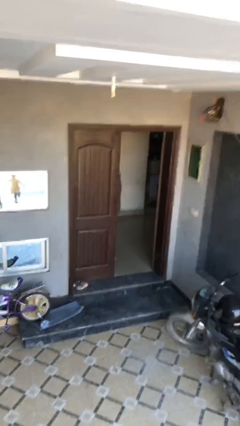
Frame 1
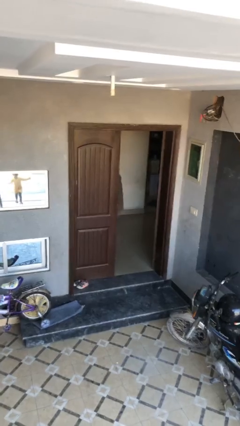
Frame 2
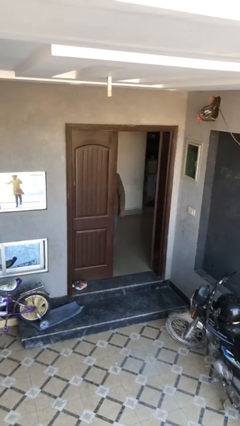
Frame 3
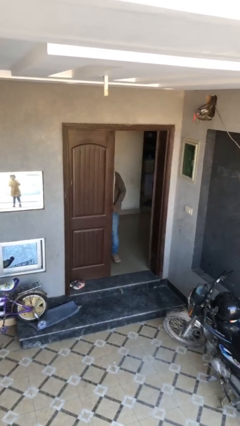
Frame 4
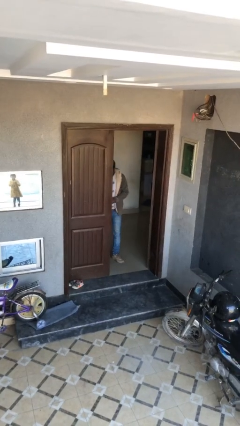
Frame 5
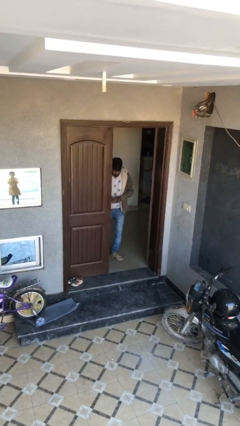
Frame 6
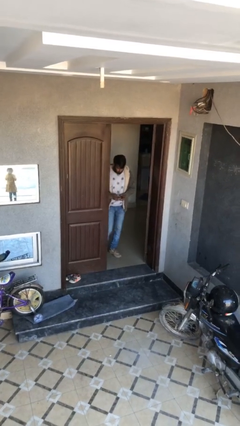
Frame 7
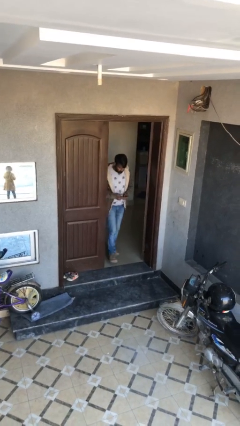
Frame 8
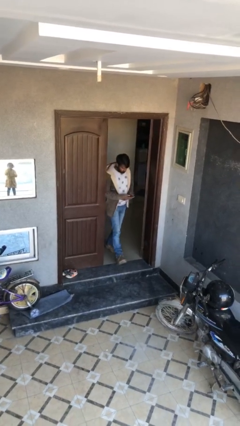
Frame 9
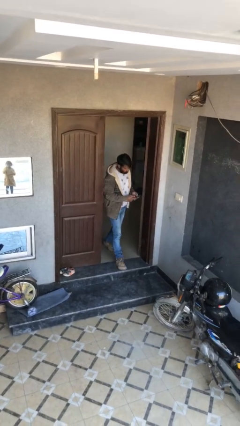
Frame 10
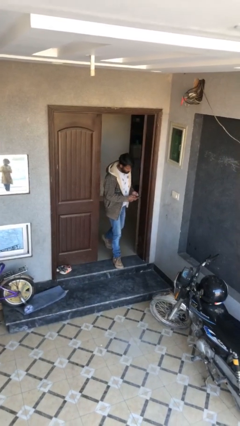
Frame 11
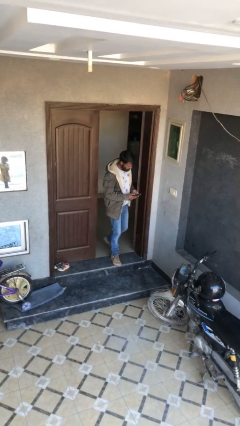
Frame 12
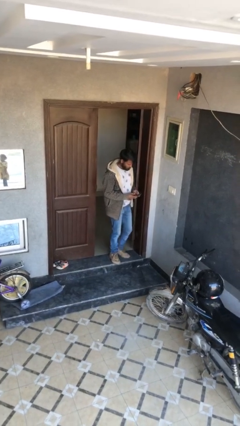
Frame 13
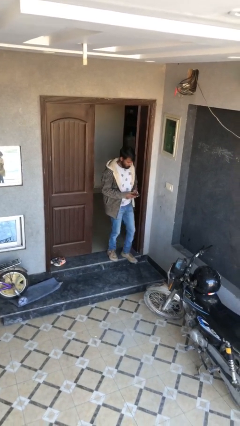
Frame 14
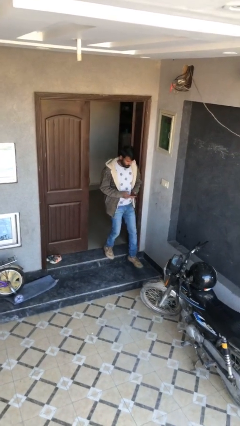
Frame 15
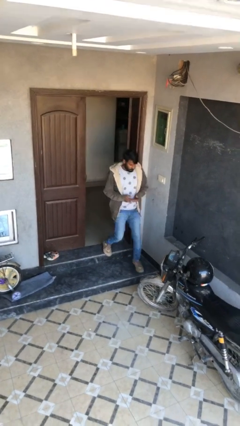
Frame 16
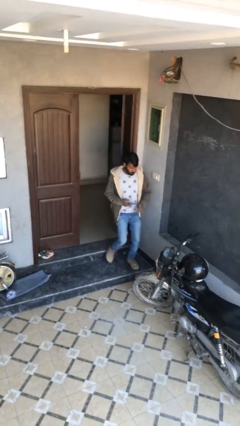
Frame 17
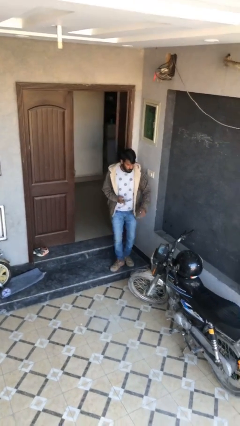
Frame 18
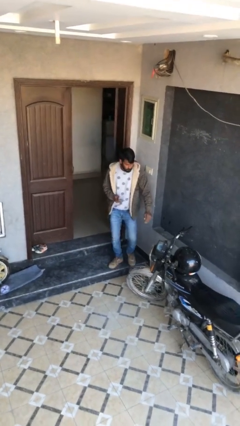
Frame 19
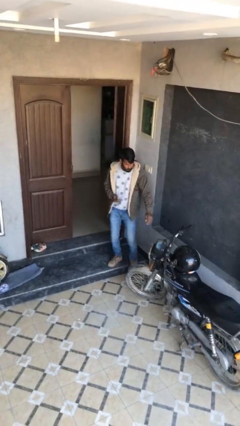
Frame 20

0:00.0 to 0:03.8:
person enters scene through structure

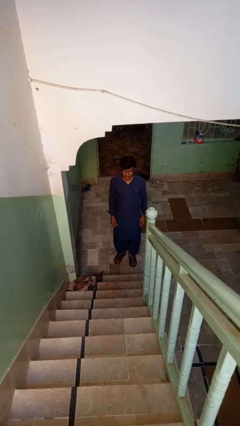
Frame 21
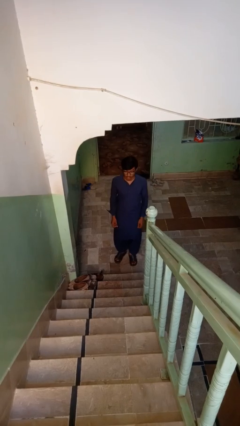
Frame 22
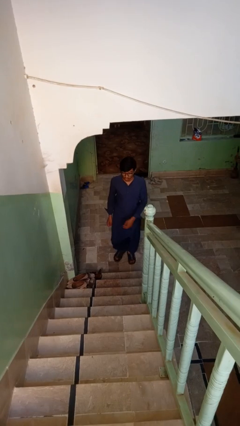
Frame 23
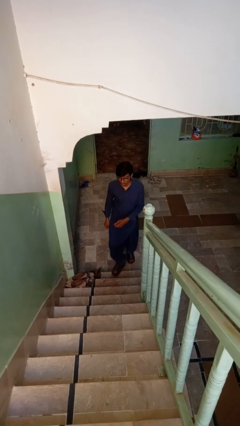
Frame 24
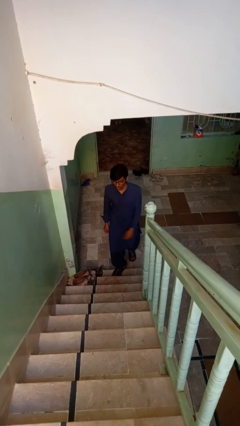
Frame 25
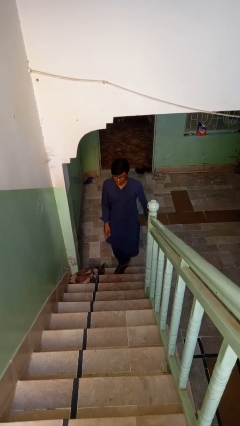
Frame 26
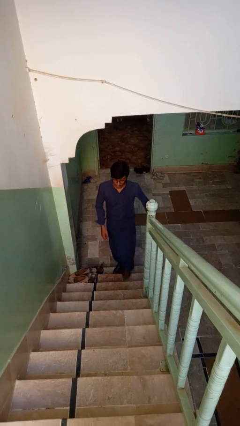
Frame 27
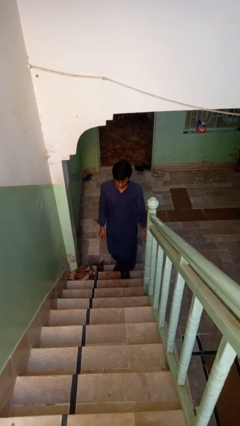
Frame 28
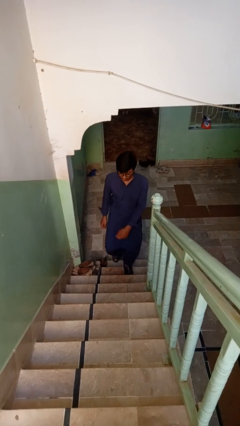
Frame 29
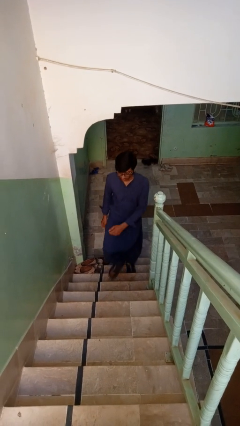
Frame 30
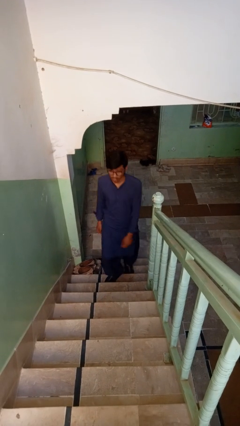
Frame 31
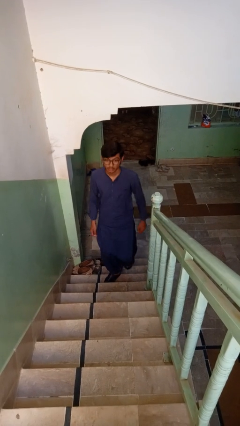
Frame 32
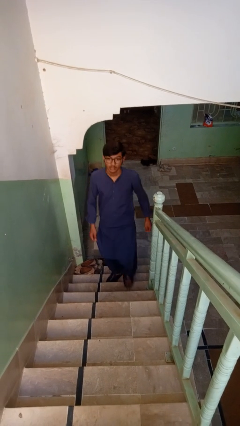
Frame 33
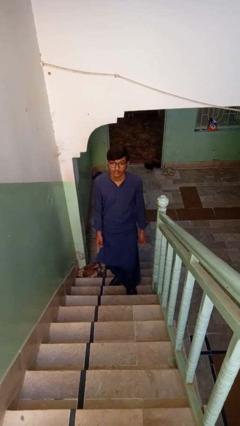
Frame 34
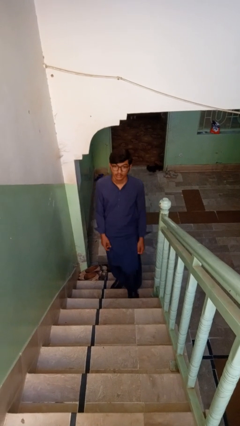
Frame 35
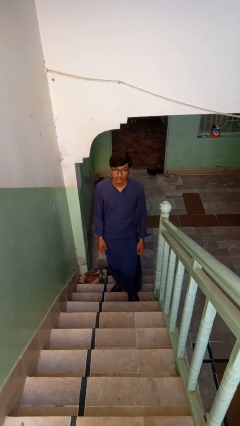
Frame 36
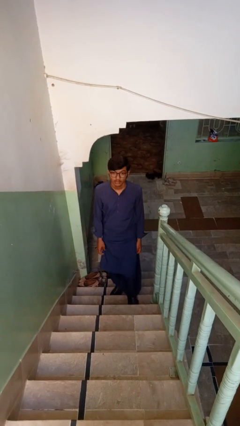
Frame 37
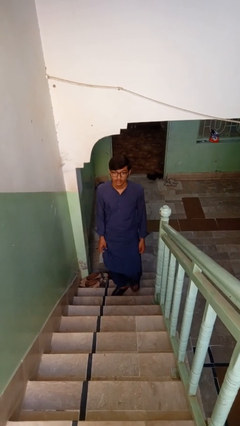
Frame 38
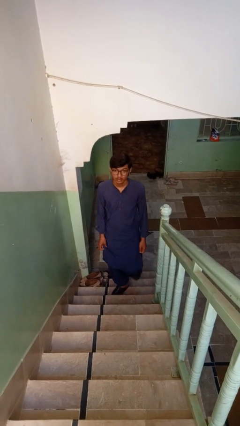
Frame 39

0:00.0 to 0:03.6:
person climbs up stairs

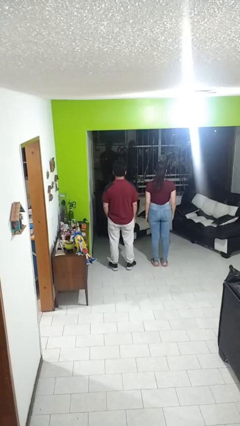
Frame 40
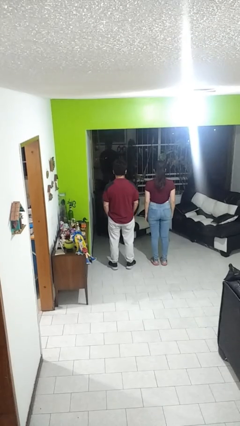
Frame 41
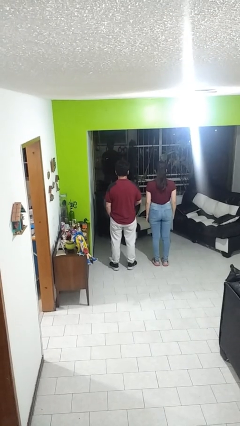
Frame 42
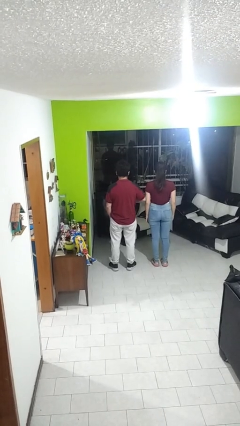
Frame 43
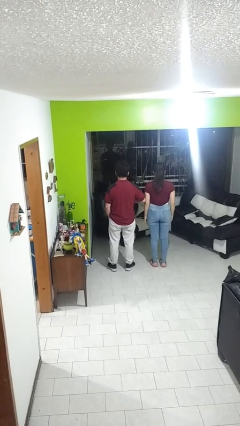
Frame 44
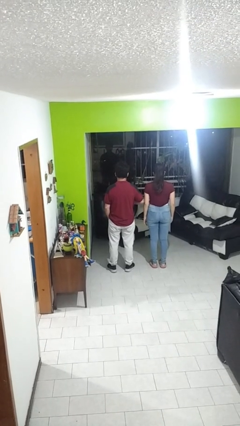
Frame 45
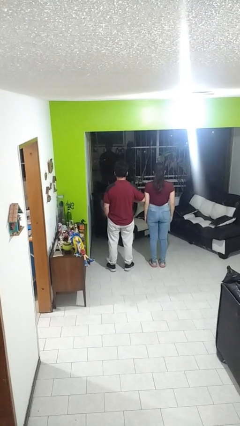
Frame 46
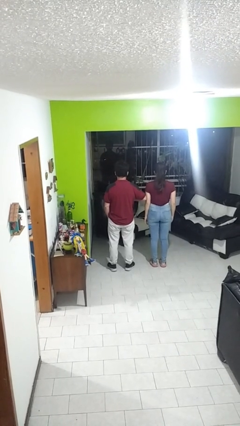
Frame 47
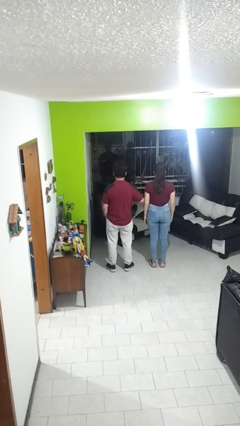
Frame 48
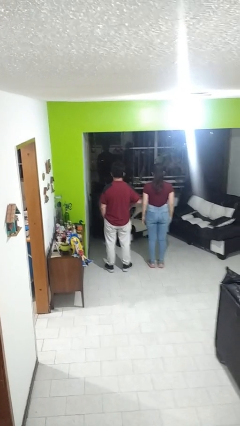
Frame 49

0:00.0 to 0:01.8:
person nudges person with elbow

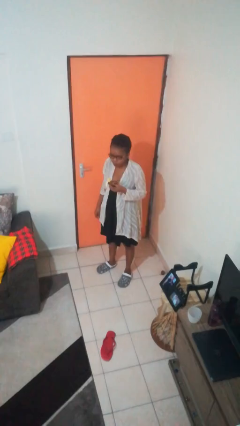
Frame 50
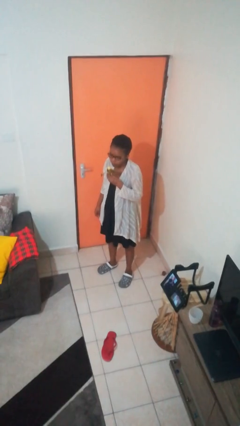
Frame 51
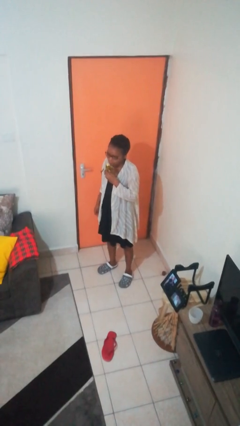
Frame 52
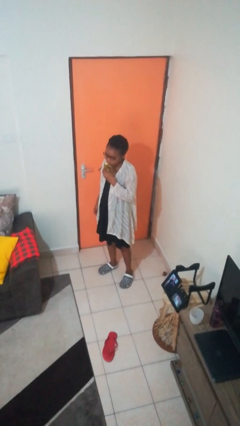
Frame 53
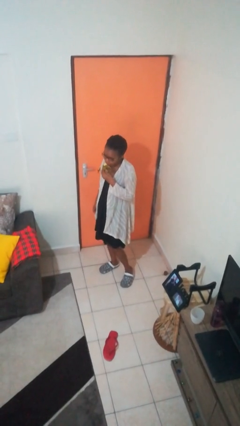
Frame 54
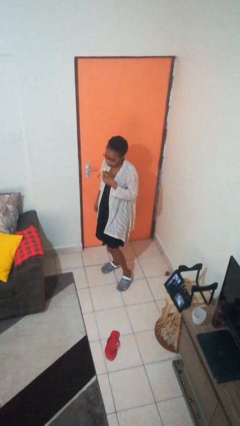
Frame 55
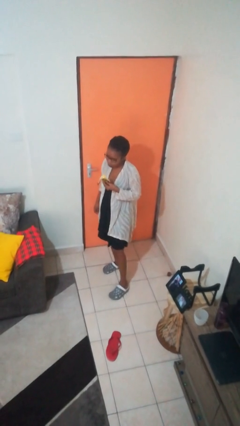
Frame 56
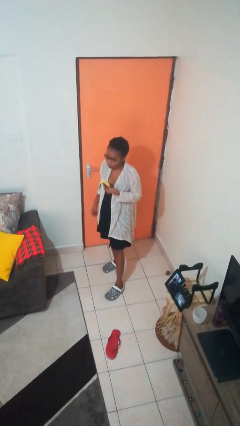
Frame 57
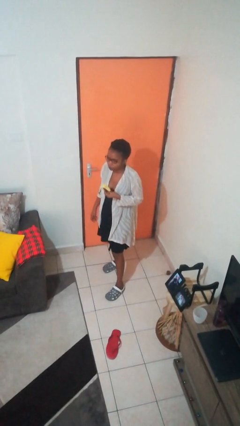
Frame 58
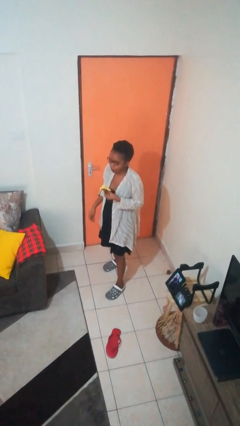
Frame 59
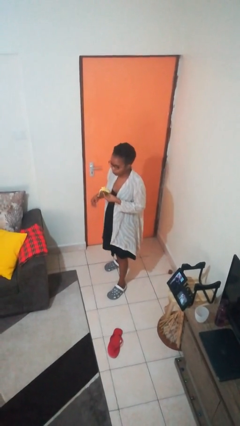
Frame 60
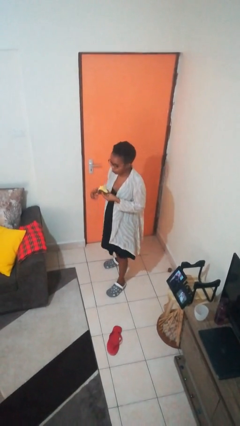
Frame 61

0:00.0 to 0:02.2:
person eats banana

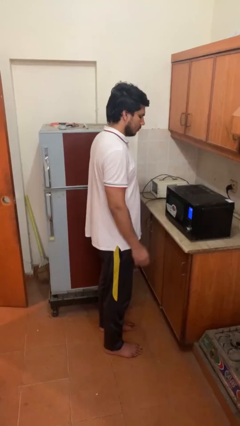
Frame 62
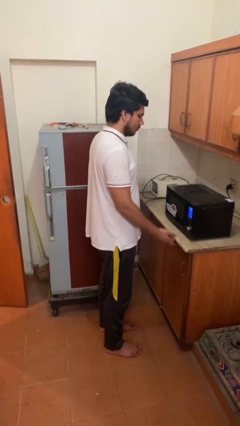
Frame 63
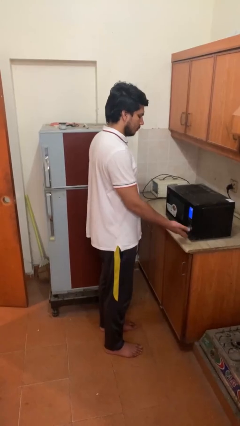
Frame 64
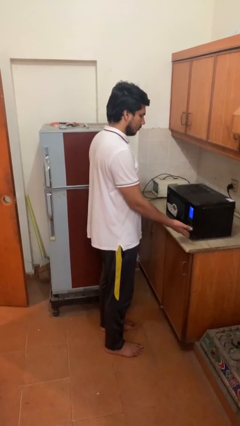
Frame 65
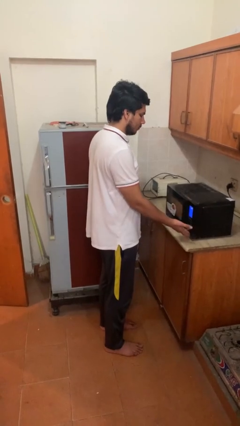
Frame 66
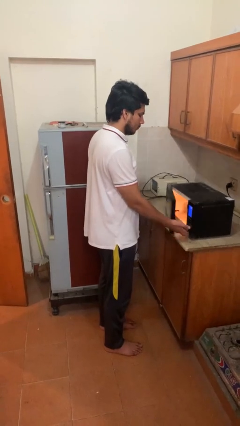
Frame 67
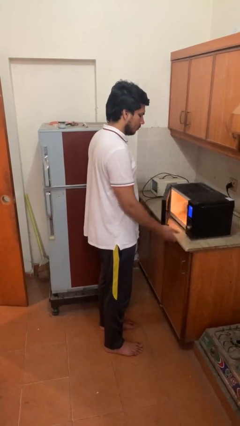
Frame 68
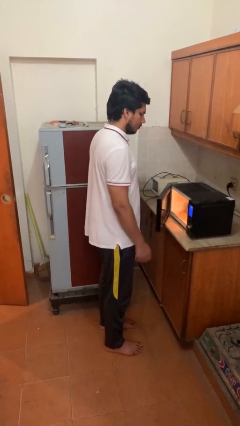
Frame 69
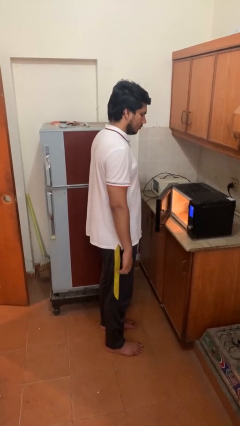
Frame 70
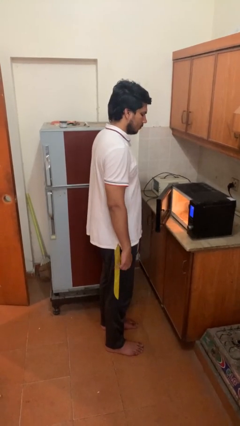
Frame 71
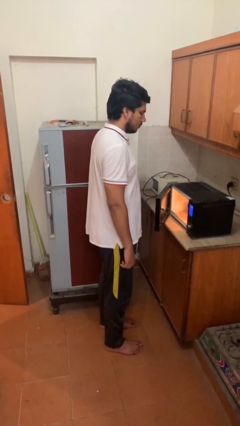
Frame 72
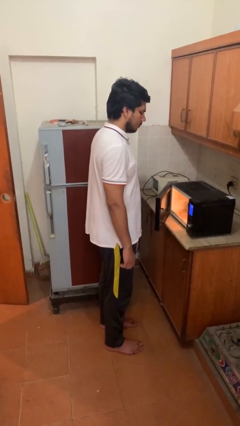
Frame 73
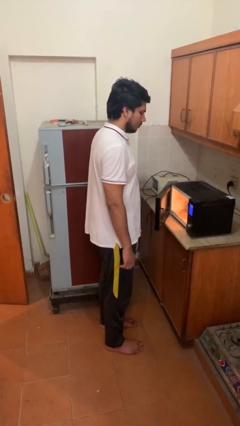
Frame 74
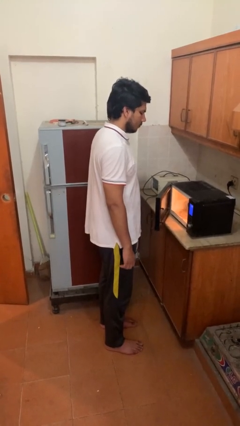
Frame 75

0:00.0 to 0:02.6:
person opens microwave

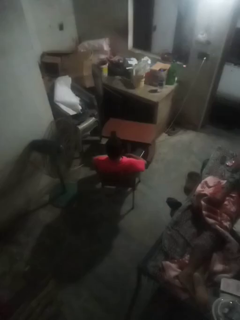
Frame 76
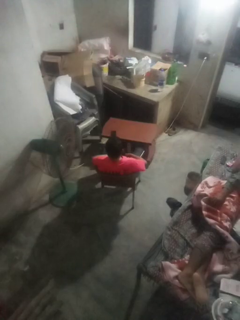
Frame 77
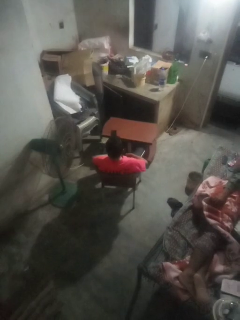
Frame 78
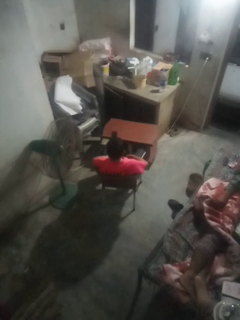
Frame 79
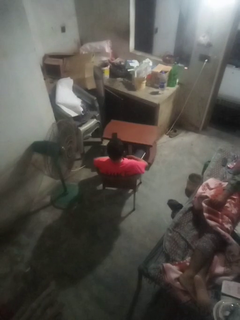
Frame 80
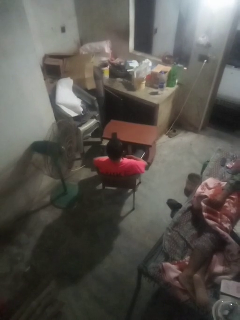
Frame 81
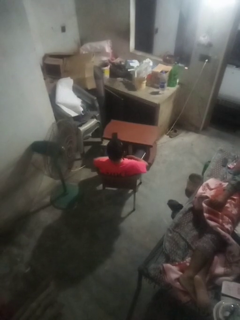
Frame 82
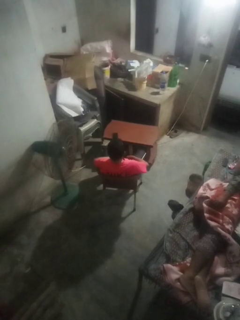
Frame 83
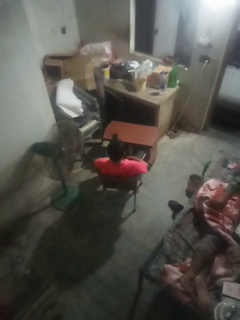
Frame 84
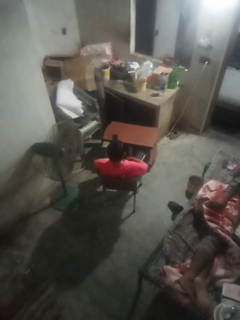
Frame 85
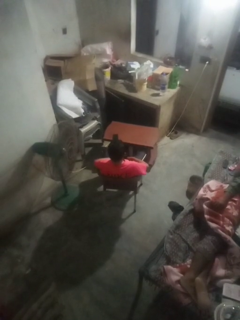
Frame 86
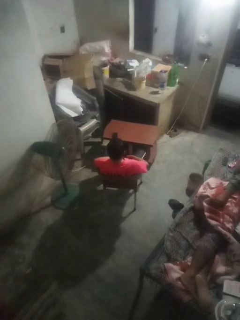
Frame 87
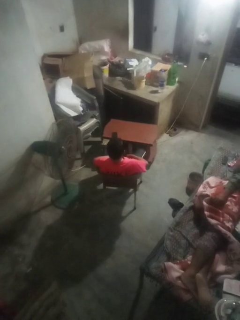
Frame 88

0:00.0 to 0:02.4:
person nods head

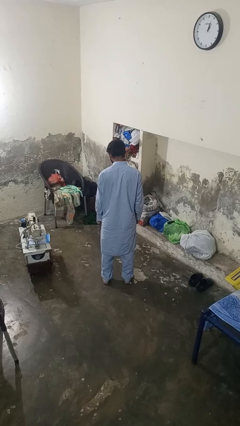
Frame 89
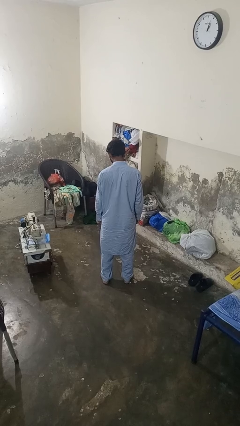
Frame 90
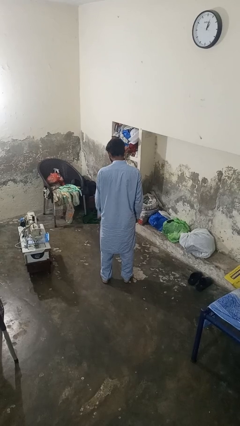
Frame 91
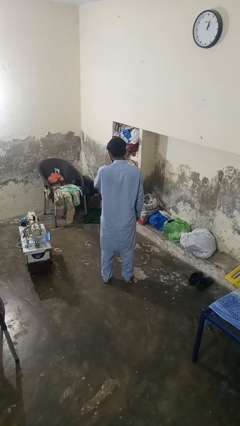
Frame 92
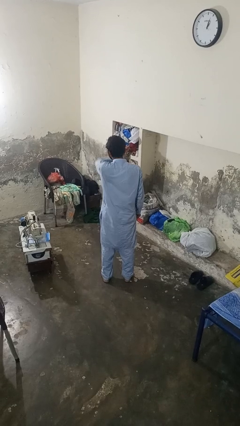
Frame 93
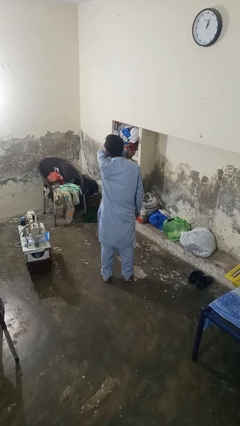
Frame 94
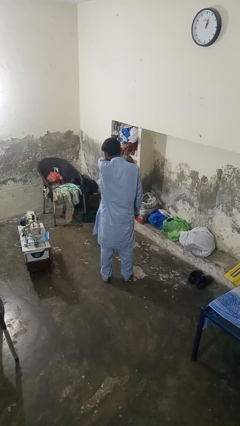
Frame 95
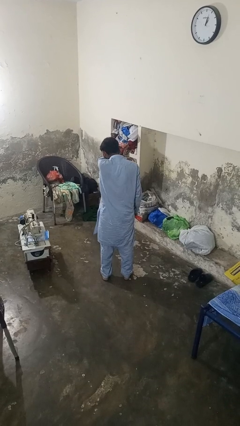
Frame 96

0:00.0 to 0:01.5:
person sneezes into arm
